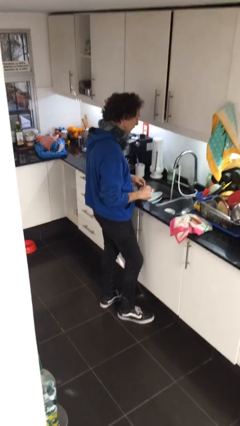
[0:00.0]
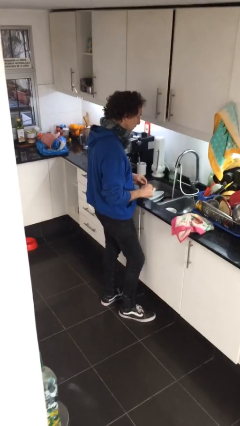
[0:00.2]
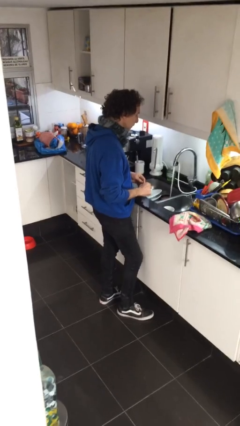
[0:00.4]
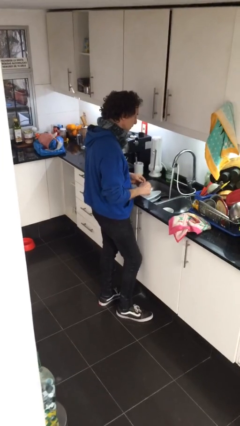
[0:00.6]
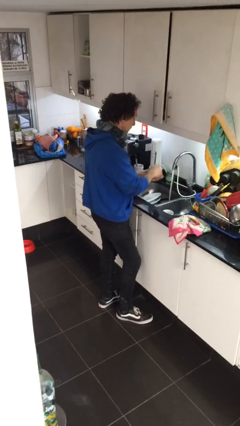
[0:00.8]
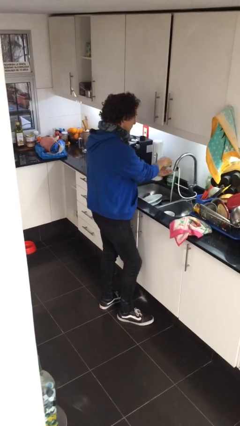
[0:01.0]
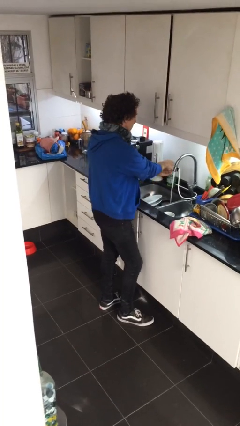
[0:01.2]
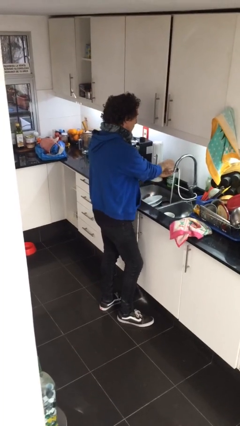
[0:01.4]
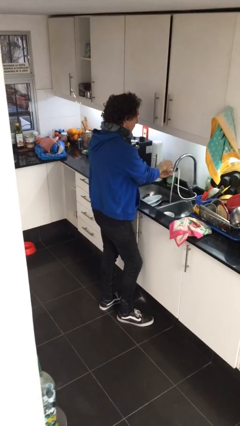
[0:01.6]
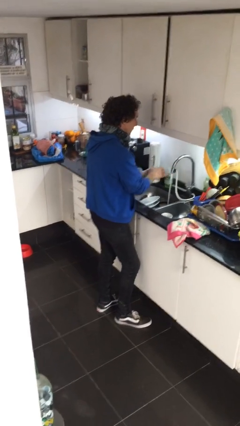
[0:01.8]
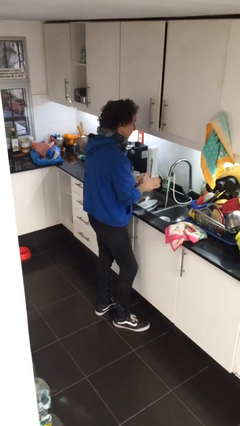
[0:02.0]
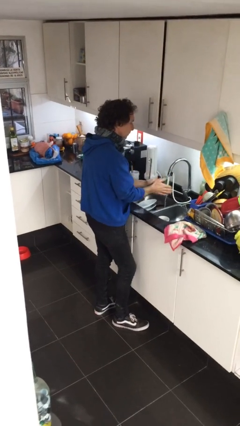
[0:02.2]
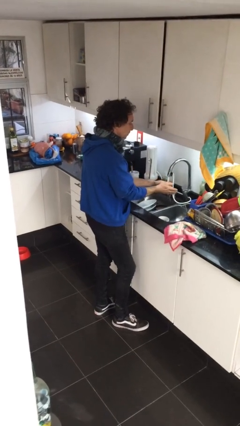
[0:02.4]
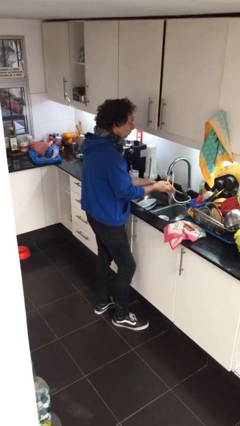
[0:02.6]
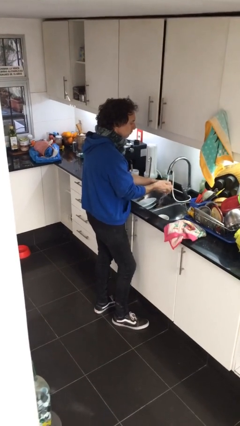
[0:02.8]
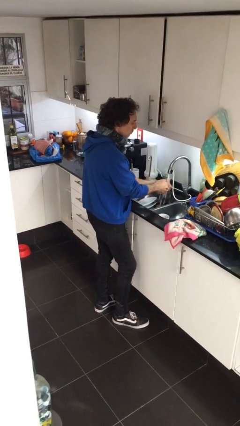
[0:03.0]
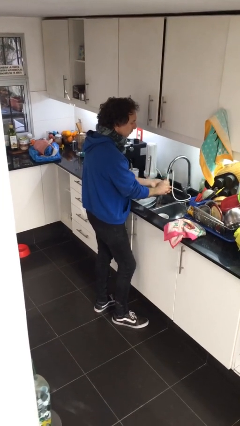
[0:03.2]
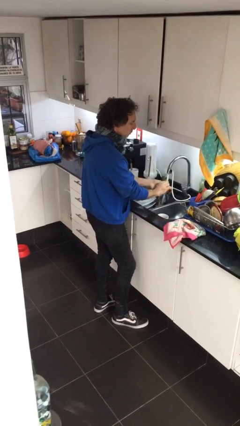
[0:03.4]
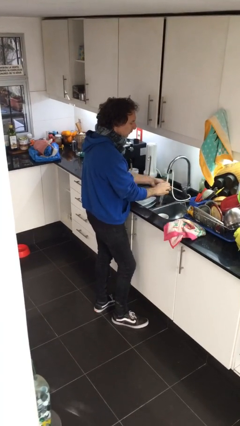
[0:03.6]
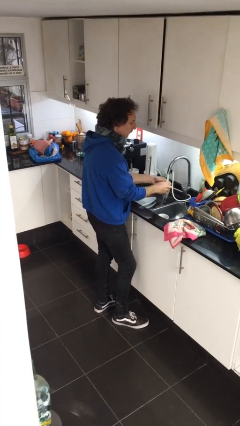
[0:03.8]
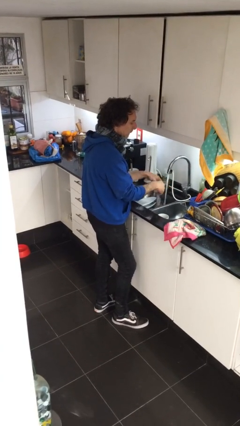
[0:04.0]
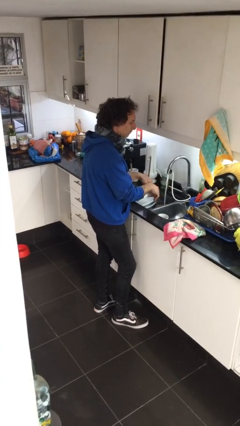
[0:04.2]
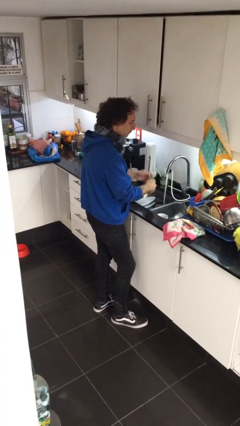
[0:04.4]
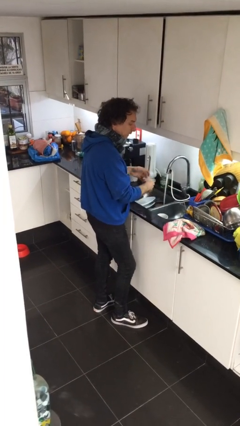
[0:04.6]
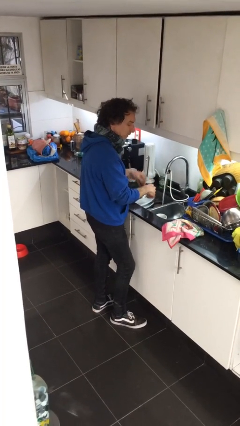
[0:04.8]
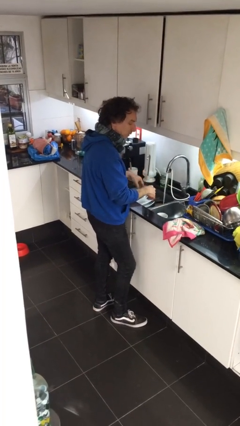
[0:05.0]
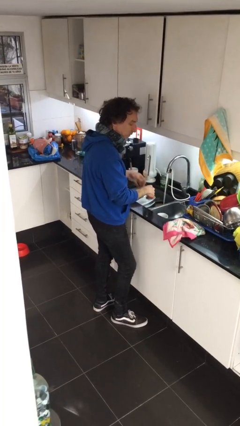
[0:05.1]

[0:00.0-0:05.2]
person washes hands

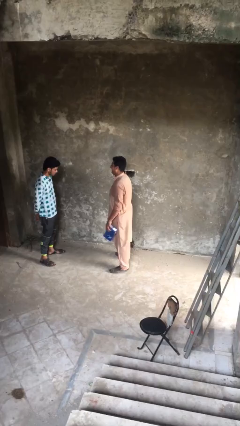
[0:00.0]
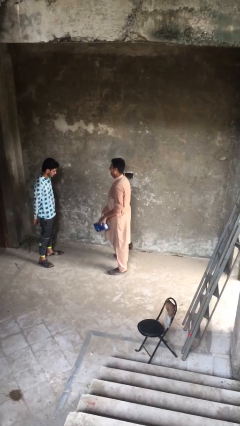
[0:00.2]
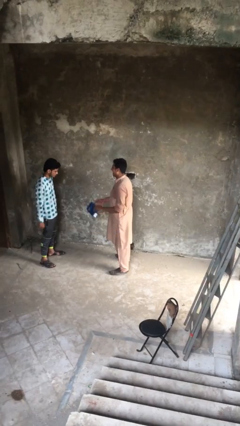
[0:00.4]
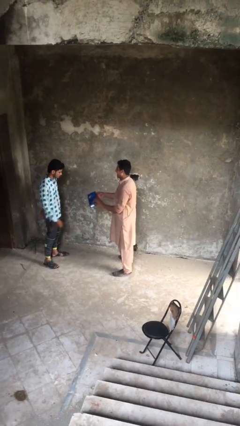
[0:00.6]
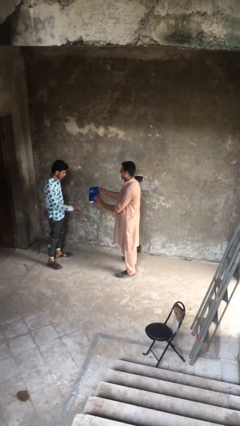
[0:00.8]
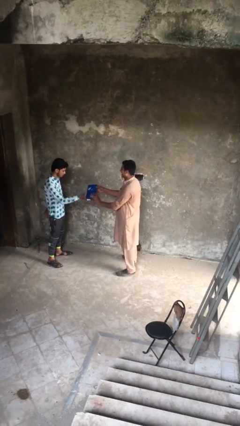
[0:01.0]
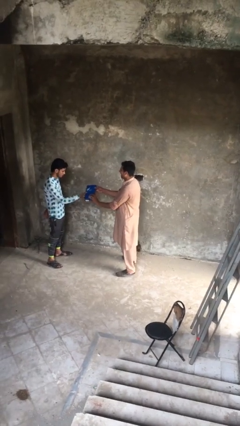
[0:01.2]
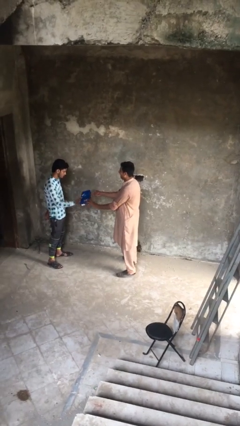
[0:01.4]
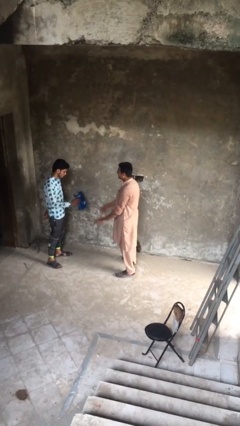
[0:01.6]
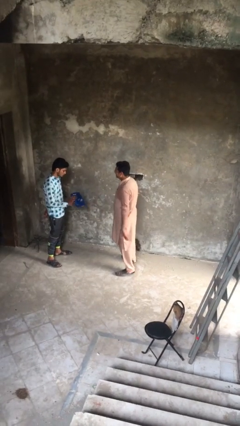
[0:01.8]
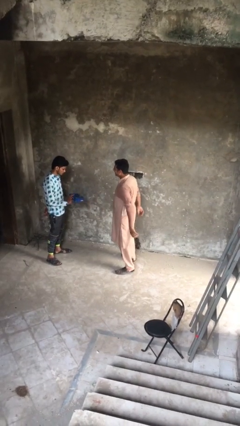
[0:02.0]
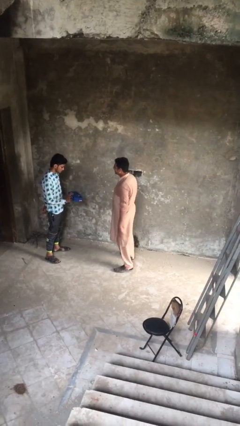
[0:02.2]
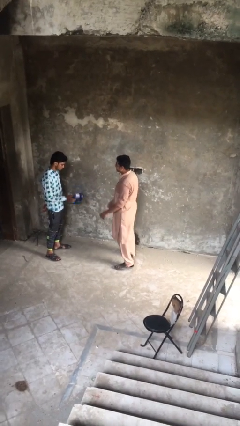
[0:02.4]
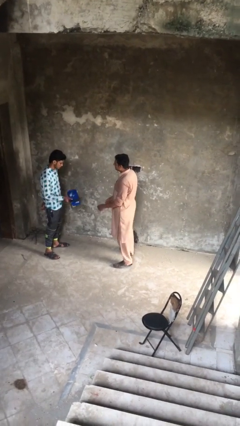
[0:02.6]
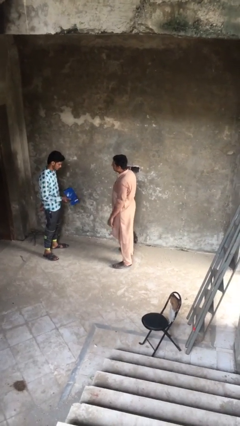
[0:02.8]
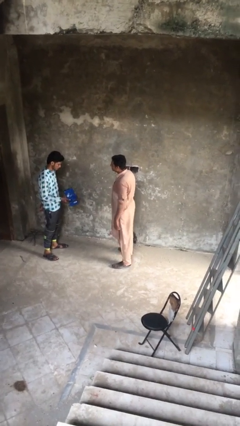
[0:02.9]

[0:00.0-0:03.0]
person transfers object to person

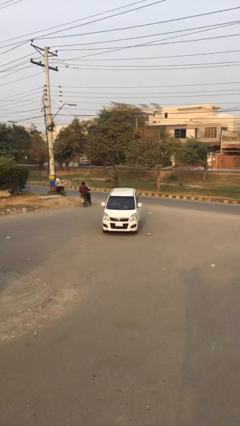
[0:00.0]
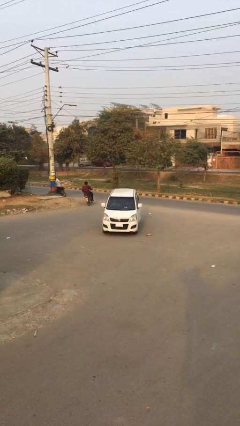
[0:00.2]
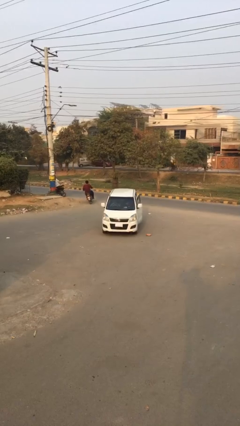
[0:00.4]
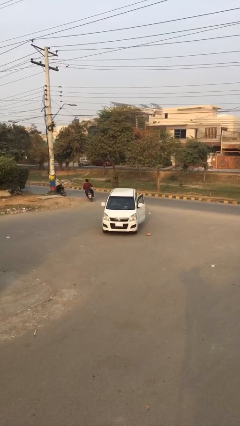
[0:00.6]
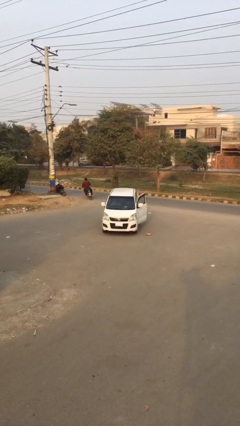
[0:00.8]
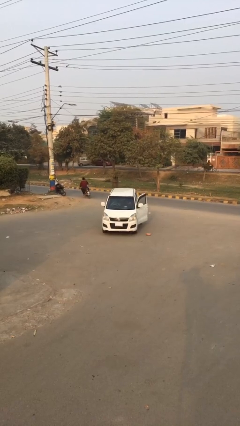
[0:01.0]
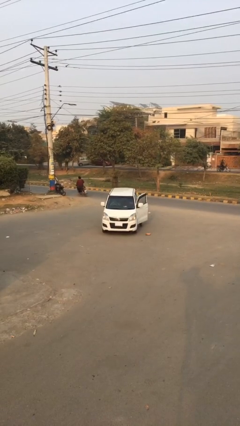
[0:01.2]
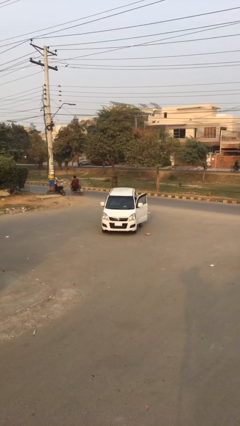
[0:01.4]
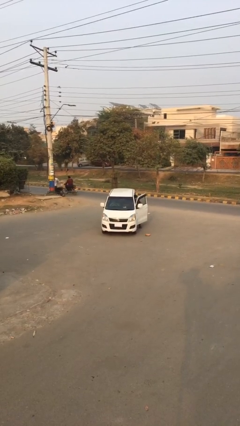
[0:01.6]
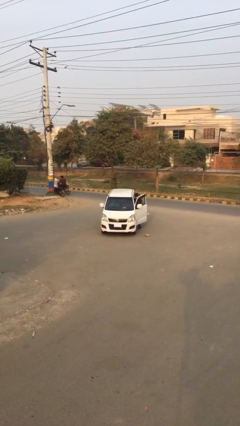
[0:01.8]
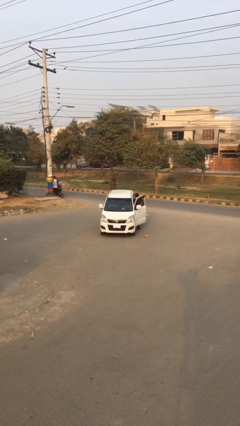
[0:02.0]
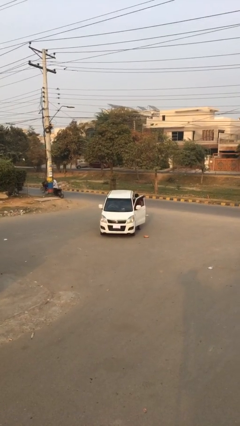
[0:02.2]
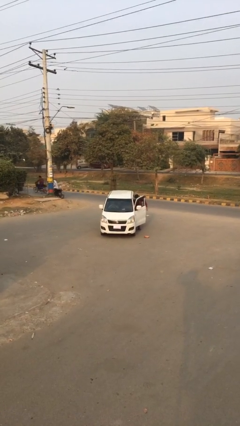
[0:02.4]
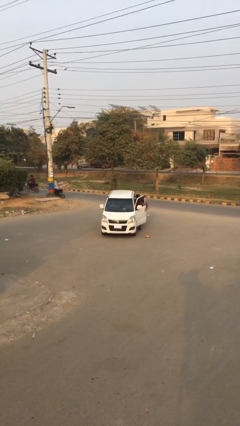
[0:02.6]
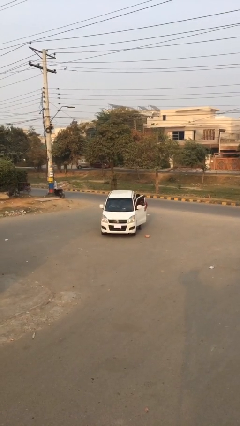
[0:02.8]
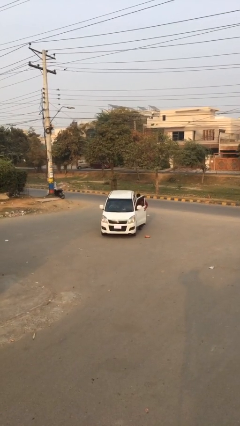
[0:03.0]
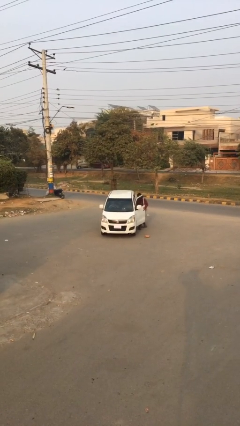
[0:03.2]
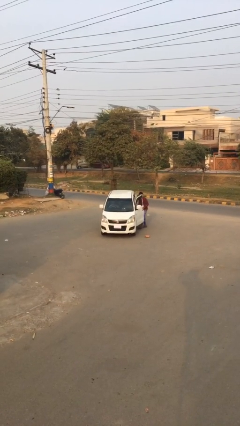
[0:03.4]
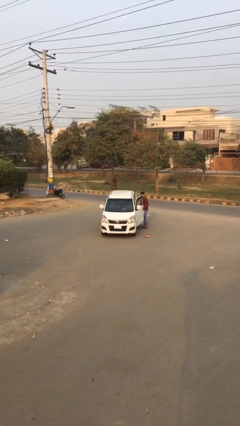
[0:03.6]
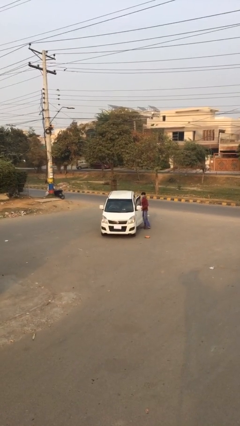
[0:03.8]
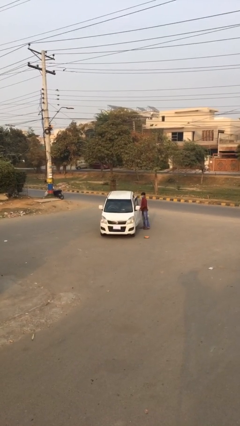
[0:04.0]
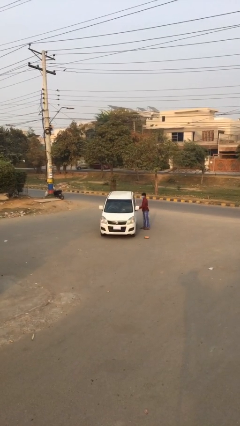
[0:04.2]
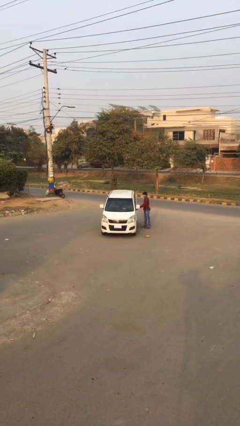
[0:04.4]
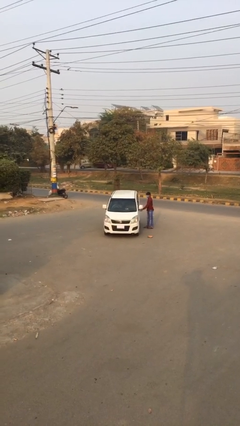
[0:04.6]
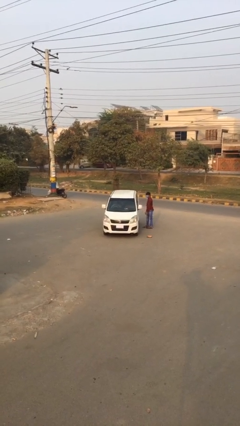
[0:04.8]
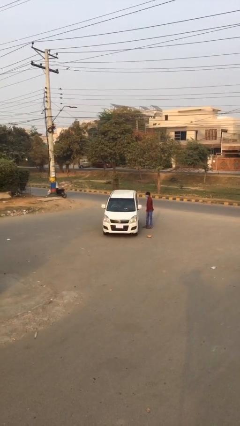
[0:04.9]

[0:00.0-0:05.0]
car drops off person

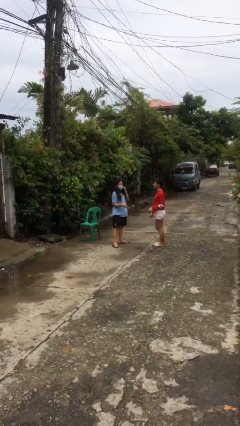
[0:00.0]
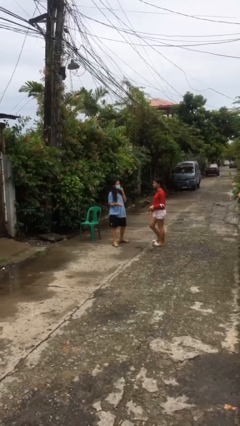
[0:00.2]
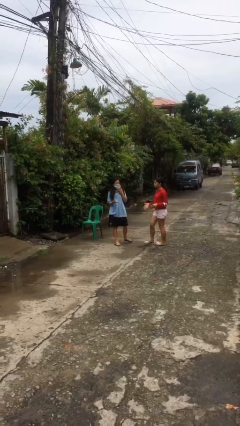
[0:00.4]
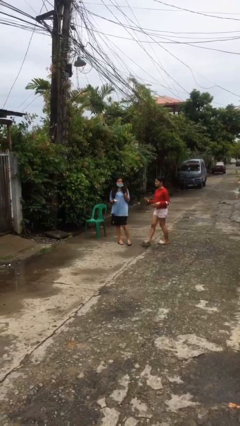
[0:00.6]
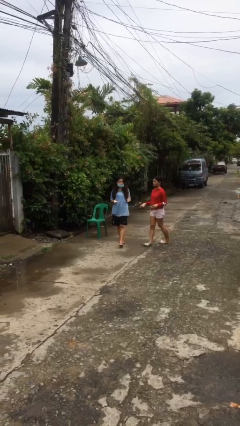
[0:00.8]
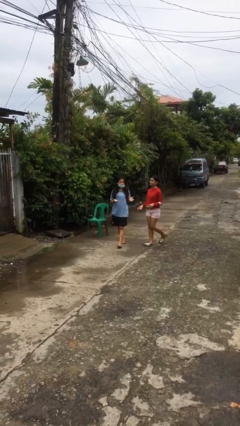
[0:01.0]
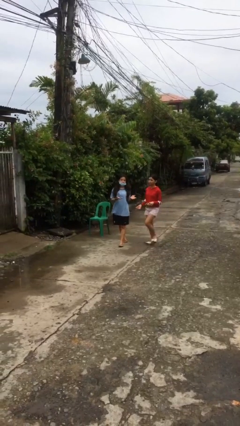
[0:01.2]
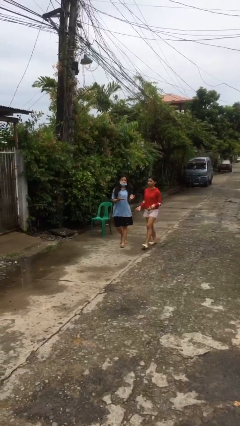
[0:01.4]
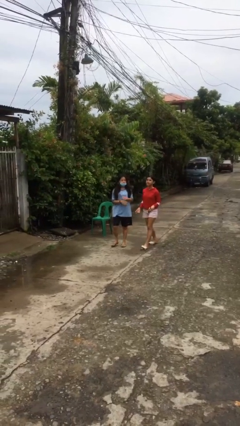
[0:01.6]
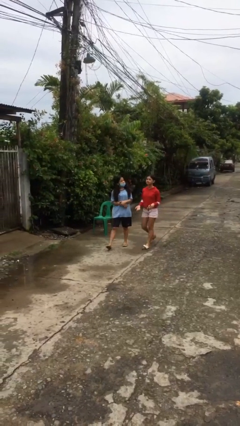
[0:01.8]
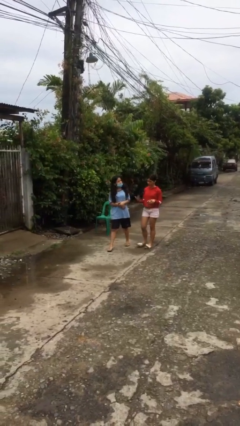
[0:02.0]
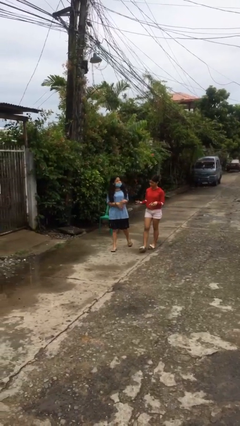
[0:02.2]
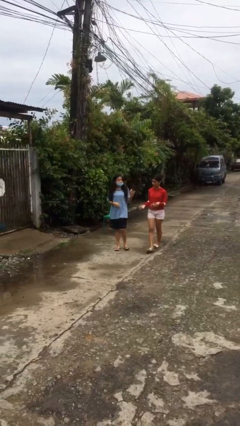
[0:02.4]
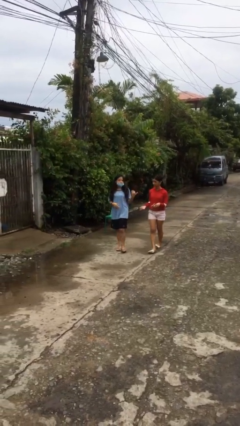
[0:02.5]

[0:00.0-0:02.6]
person talks to person

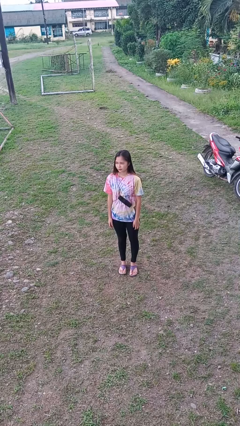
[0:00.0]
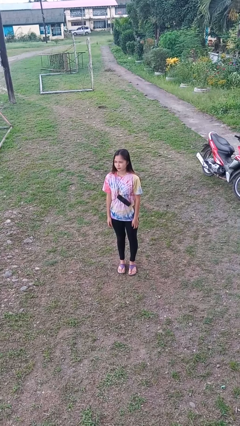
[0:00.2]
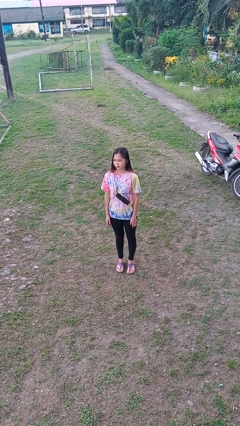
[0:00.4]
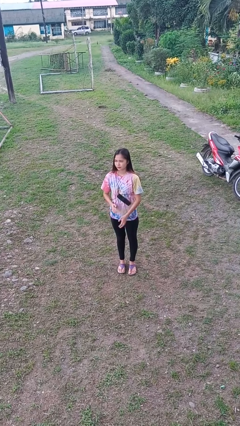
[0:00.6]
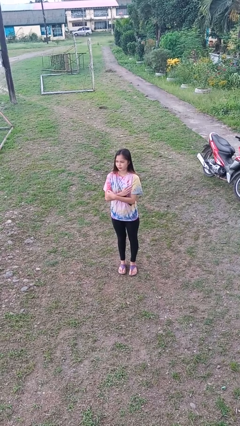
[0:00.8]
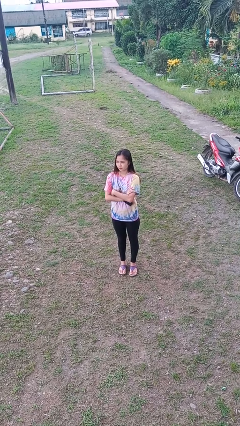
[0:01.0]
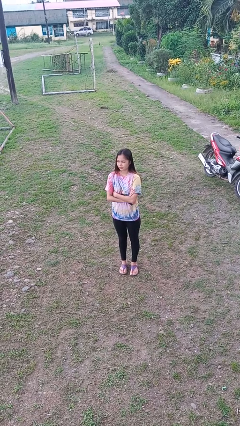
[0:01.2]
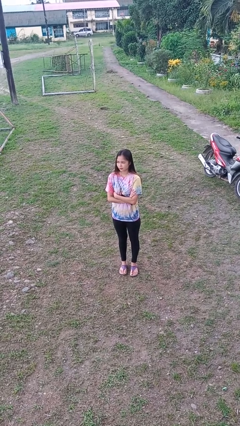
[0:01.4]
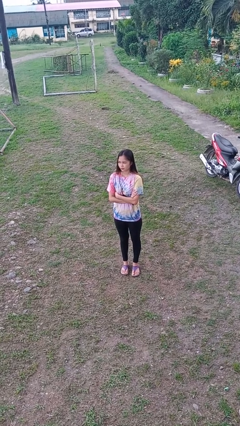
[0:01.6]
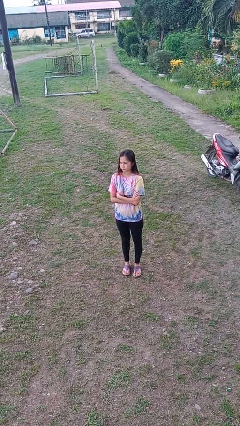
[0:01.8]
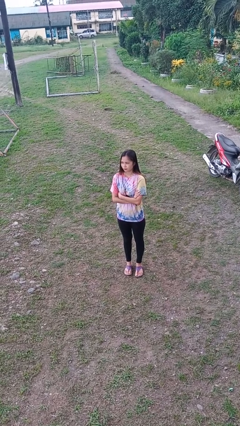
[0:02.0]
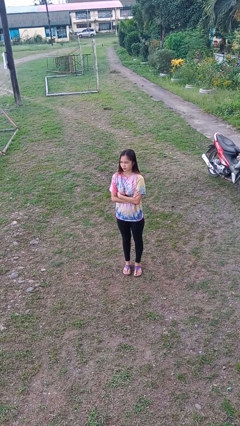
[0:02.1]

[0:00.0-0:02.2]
person crosses arms
